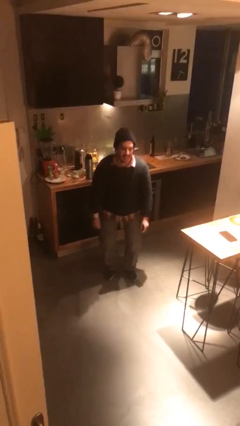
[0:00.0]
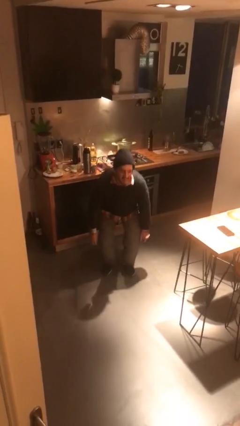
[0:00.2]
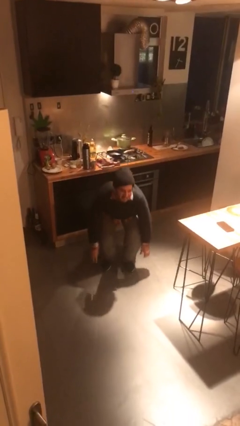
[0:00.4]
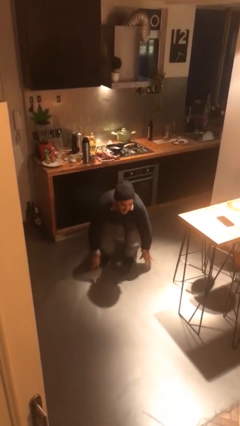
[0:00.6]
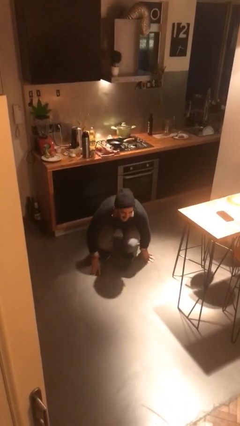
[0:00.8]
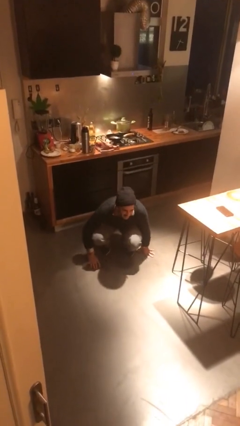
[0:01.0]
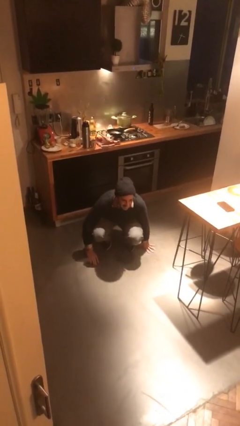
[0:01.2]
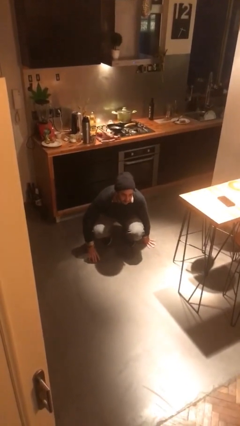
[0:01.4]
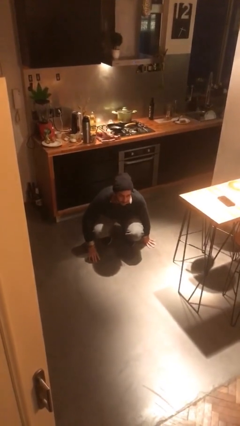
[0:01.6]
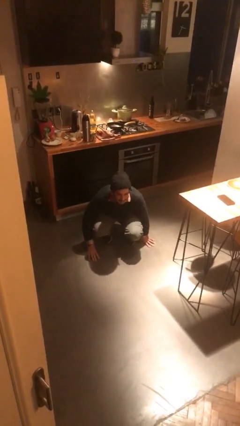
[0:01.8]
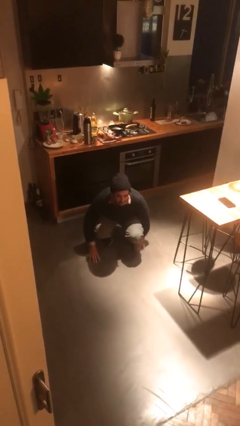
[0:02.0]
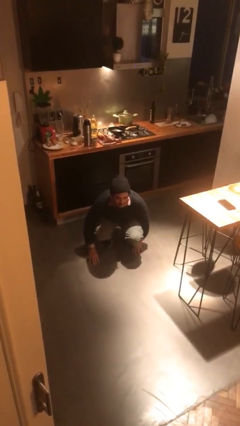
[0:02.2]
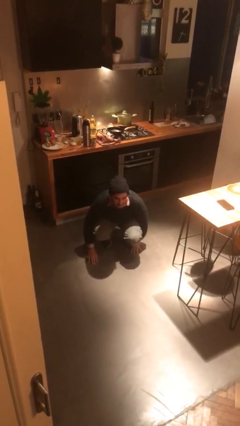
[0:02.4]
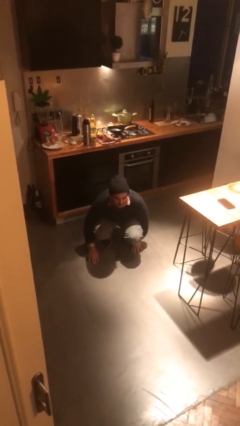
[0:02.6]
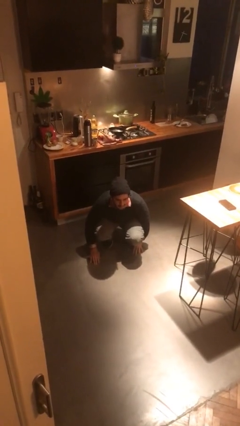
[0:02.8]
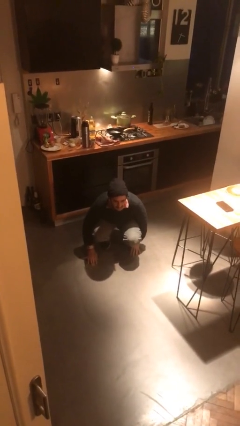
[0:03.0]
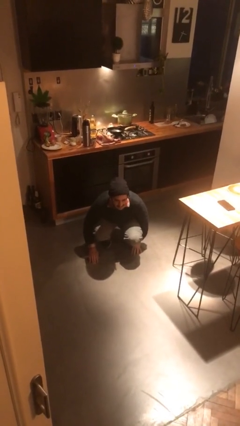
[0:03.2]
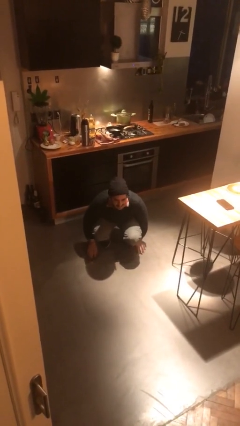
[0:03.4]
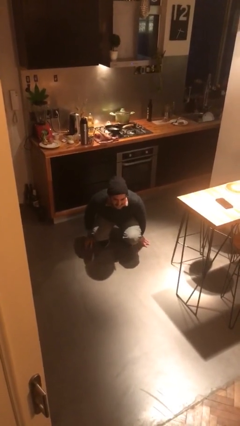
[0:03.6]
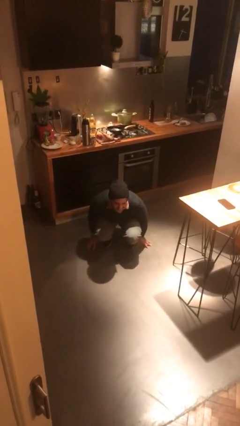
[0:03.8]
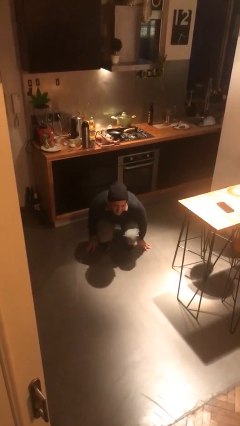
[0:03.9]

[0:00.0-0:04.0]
person squats

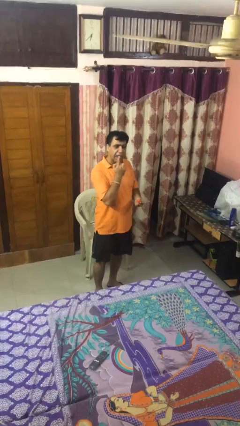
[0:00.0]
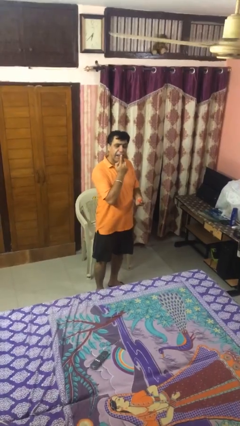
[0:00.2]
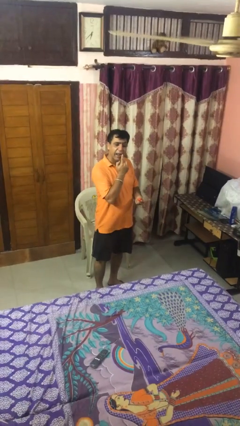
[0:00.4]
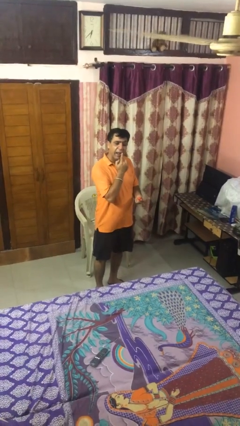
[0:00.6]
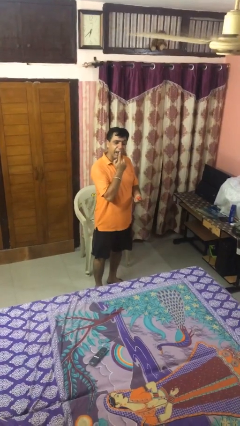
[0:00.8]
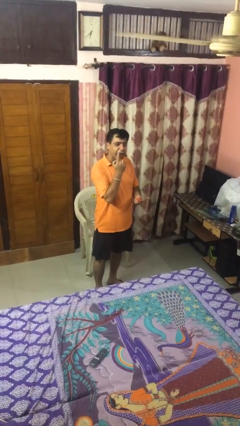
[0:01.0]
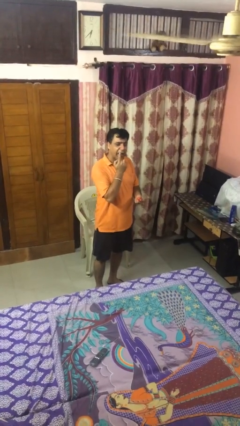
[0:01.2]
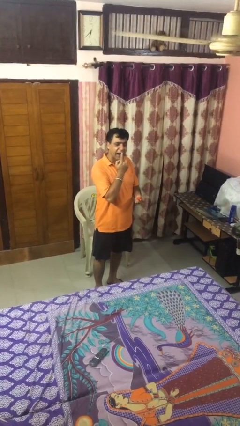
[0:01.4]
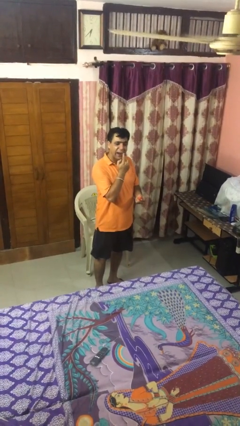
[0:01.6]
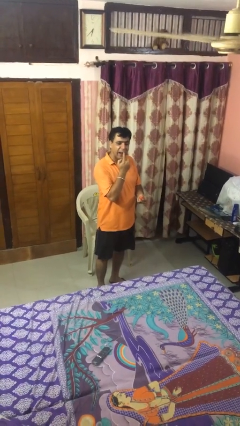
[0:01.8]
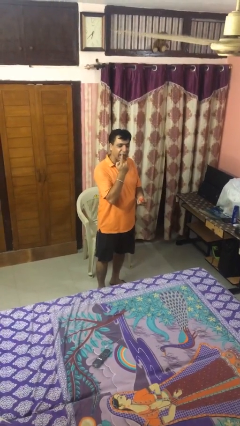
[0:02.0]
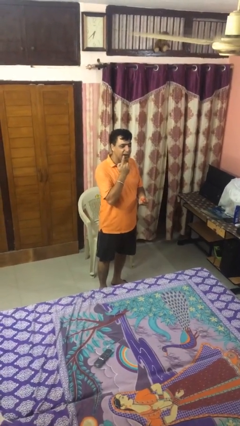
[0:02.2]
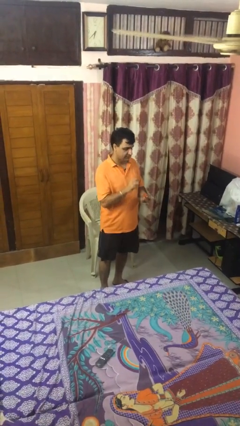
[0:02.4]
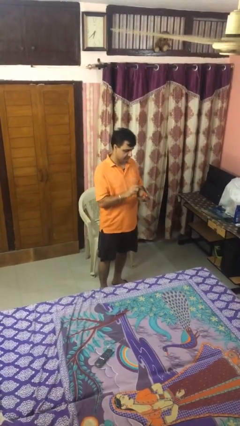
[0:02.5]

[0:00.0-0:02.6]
person applies lip makeup

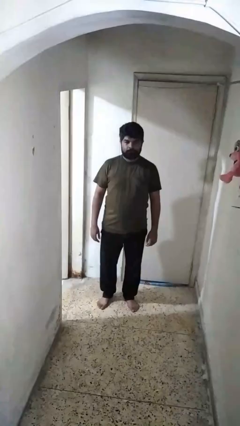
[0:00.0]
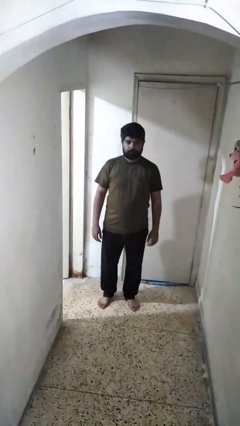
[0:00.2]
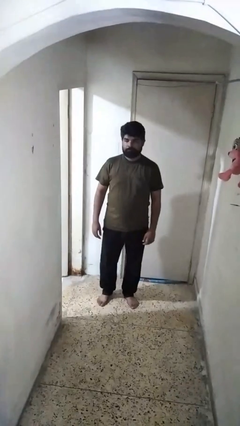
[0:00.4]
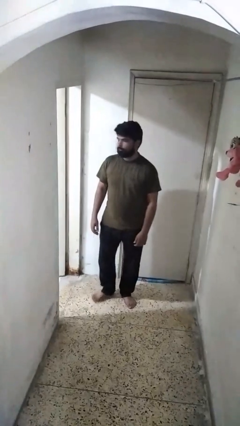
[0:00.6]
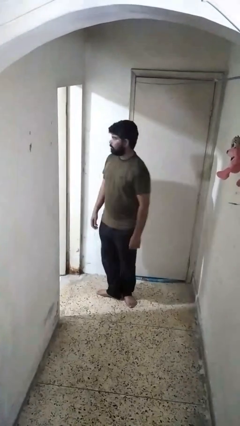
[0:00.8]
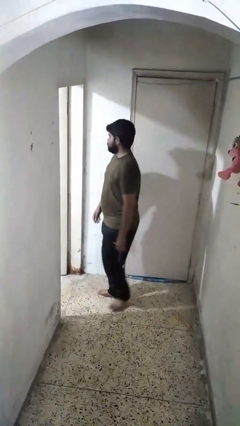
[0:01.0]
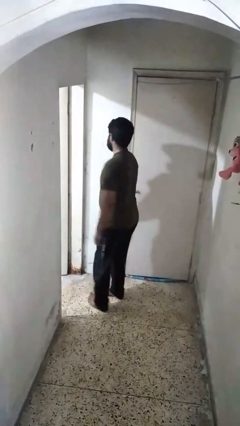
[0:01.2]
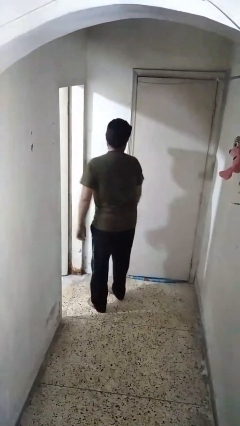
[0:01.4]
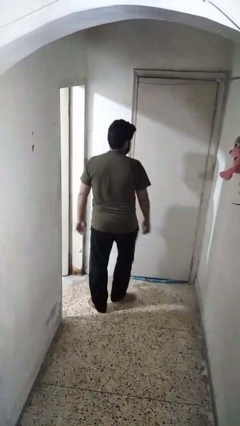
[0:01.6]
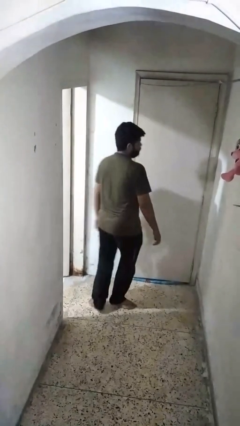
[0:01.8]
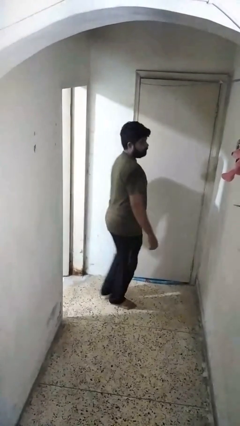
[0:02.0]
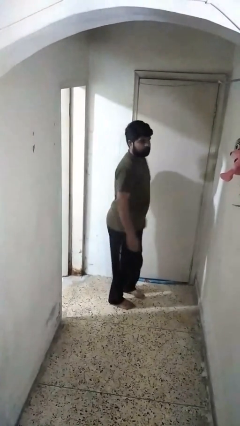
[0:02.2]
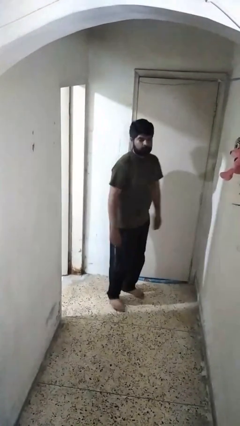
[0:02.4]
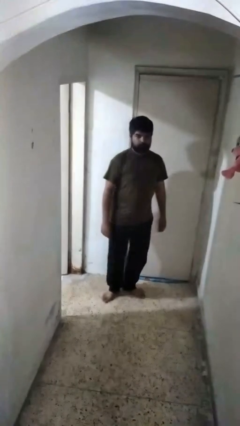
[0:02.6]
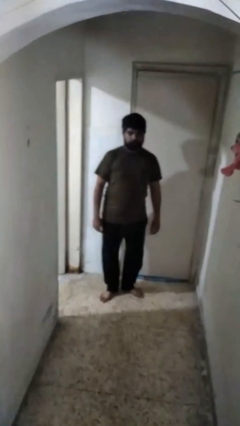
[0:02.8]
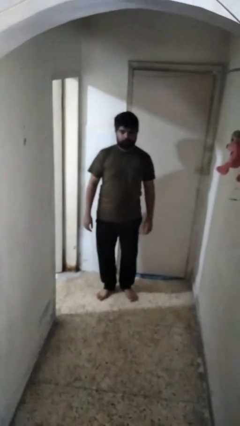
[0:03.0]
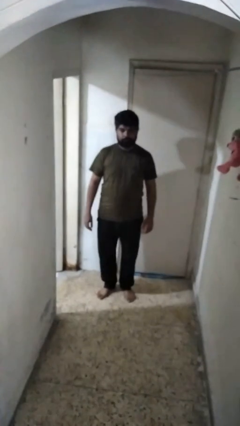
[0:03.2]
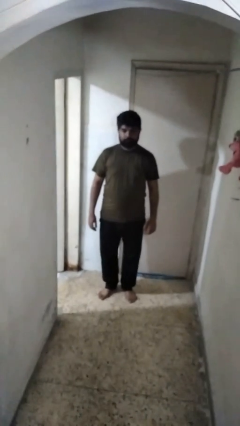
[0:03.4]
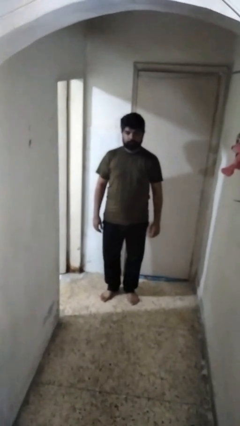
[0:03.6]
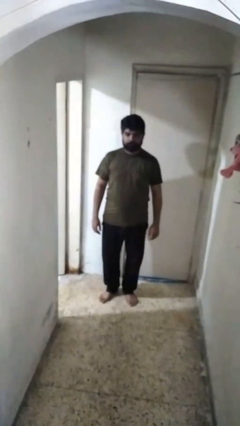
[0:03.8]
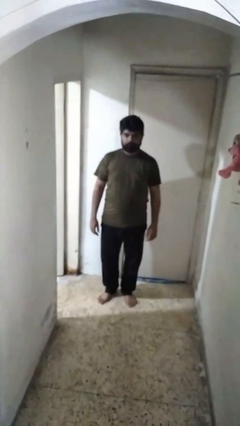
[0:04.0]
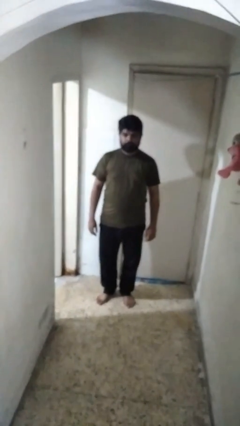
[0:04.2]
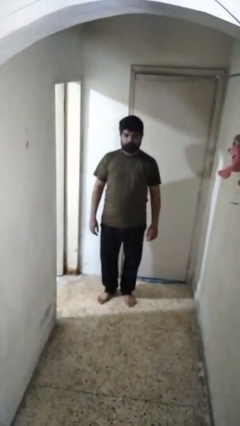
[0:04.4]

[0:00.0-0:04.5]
person twirls

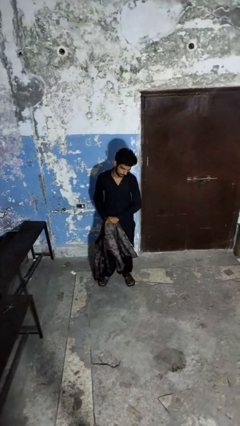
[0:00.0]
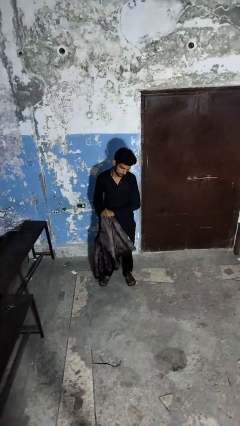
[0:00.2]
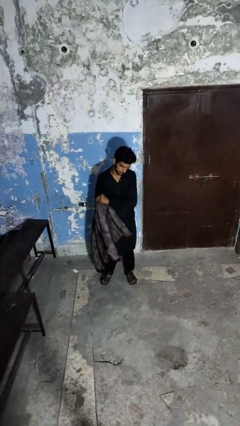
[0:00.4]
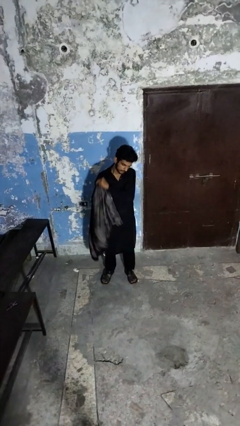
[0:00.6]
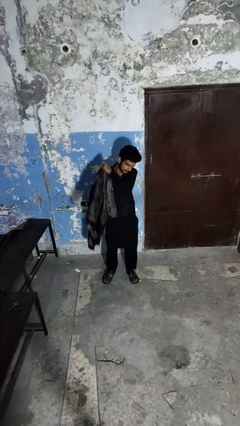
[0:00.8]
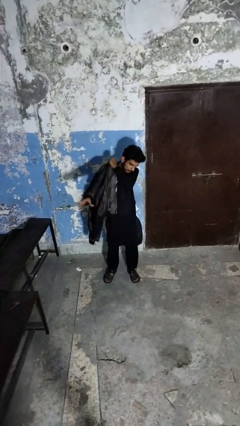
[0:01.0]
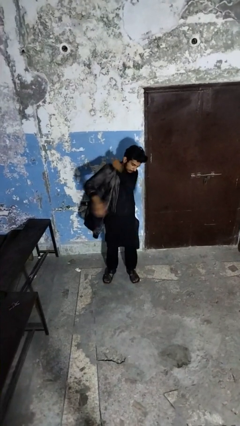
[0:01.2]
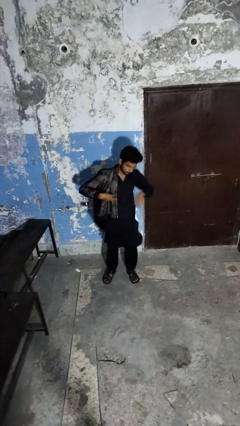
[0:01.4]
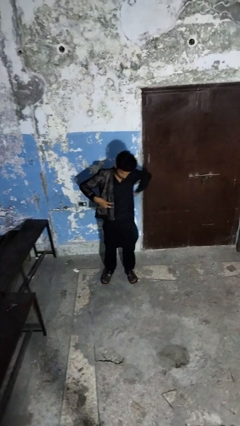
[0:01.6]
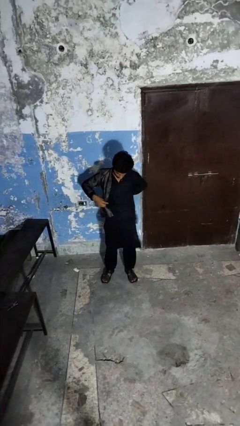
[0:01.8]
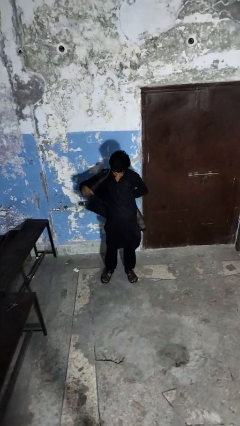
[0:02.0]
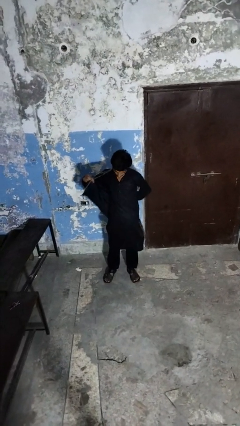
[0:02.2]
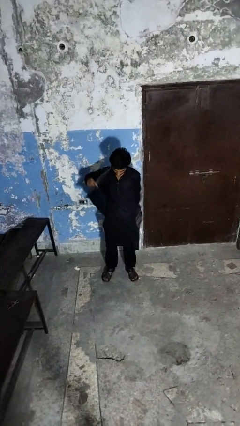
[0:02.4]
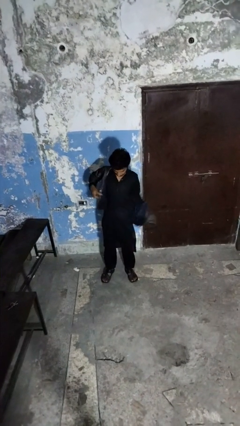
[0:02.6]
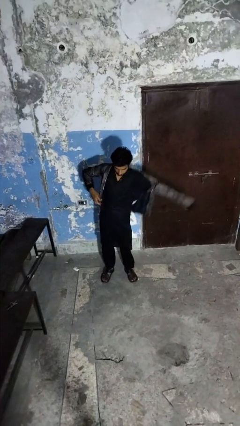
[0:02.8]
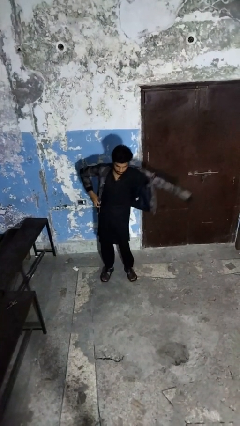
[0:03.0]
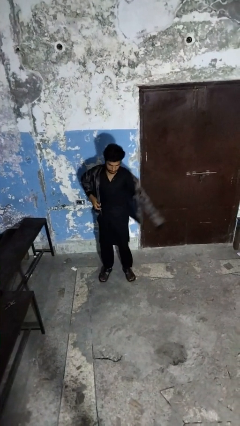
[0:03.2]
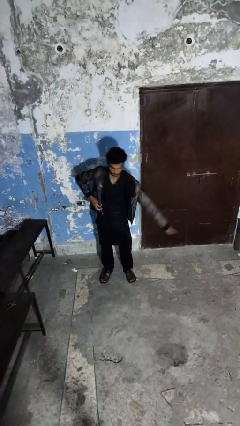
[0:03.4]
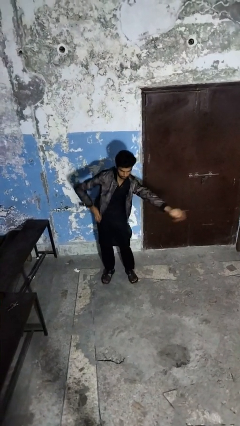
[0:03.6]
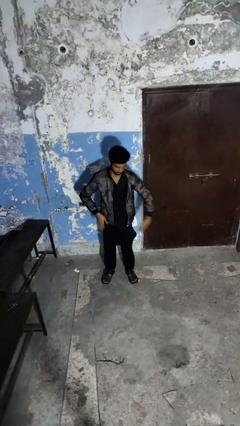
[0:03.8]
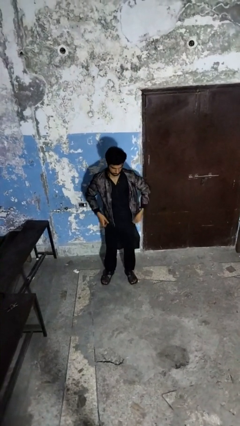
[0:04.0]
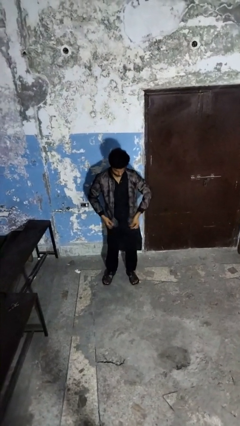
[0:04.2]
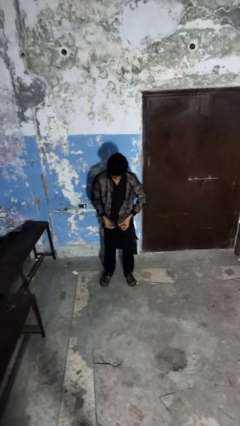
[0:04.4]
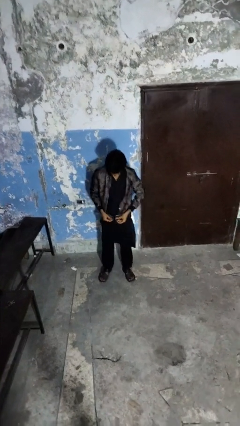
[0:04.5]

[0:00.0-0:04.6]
person puts on jacket

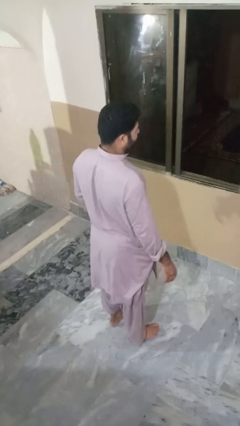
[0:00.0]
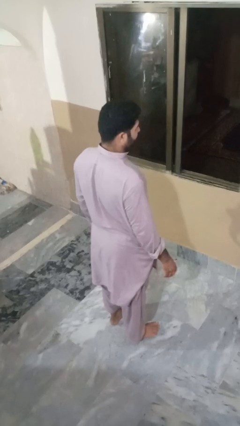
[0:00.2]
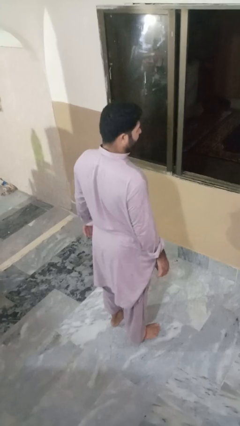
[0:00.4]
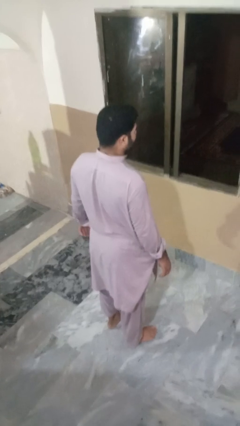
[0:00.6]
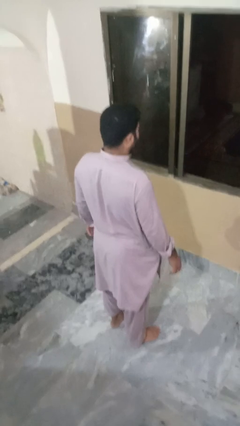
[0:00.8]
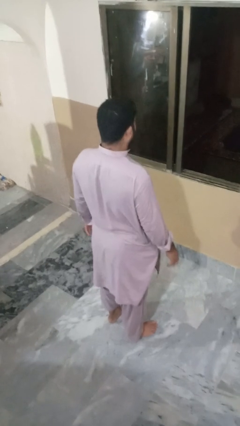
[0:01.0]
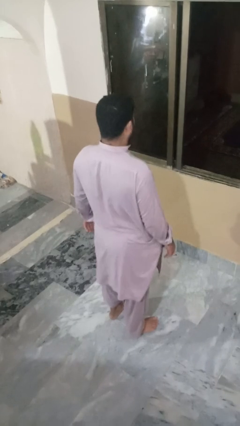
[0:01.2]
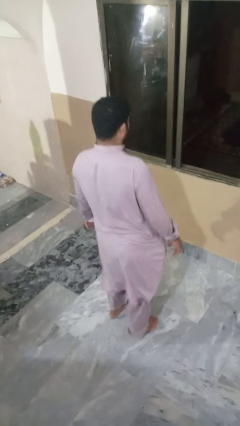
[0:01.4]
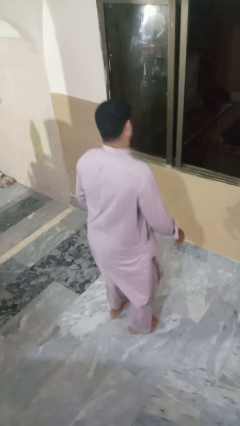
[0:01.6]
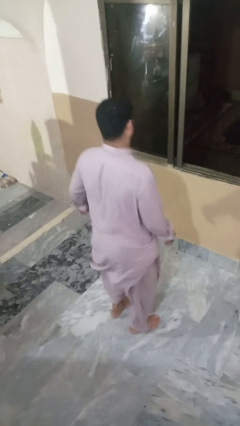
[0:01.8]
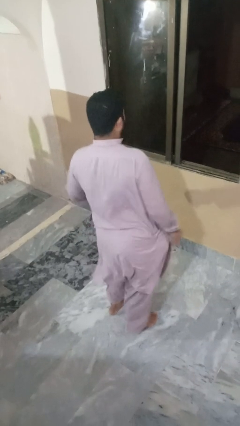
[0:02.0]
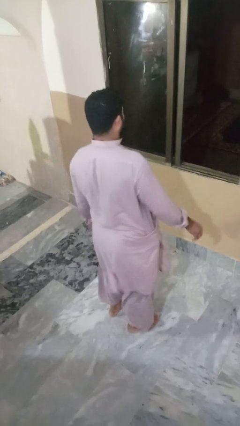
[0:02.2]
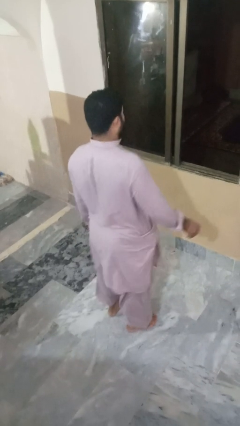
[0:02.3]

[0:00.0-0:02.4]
person wiggles hips
